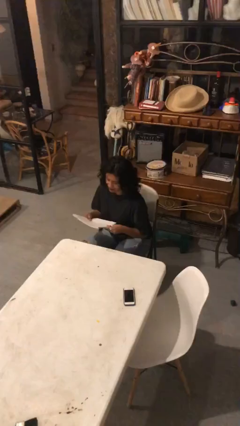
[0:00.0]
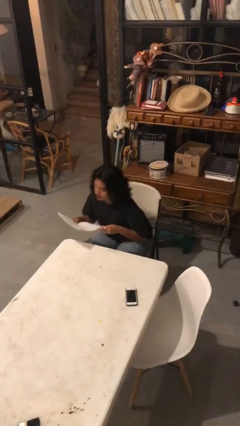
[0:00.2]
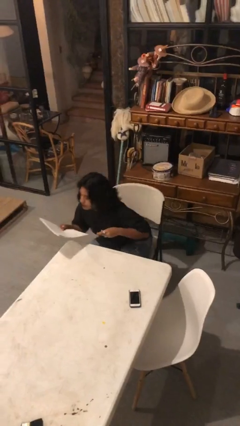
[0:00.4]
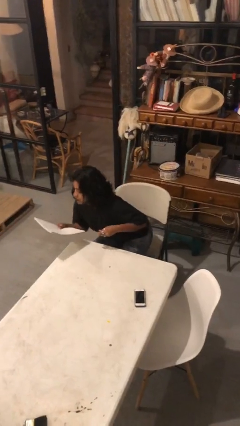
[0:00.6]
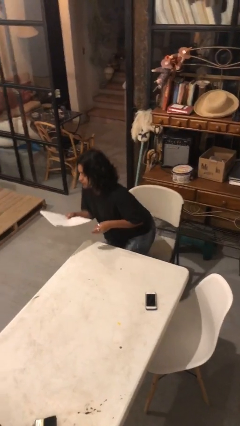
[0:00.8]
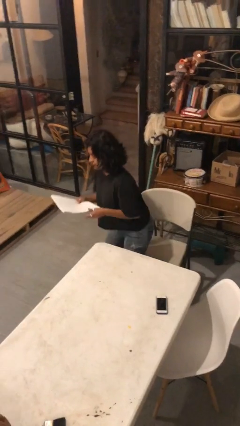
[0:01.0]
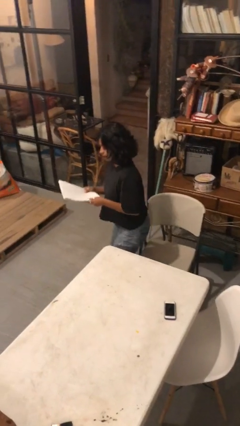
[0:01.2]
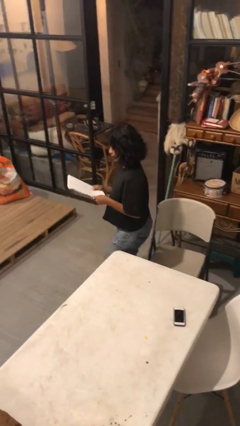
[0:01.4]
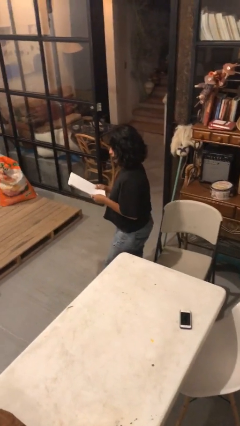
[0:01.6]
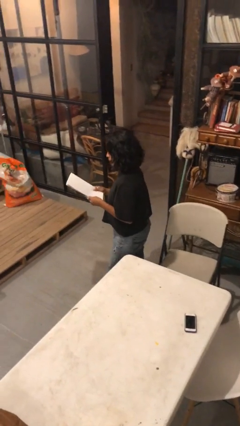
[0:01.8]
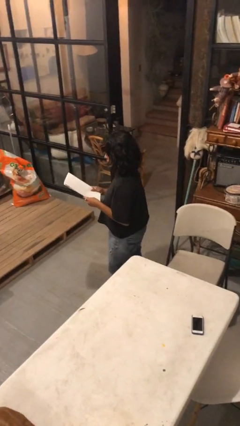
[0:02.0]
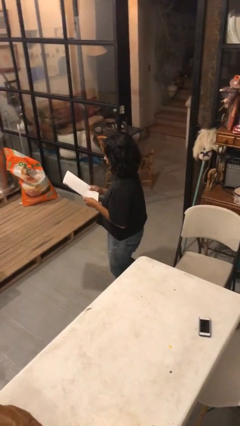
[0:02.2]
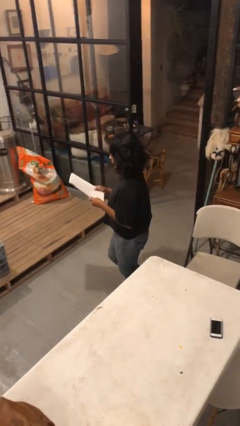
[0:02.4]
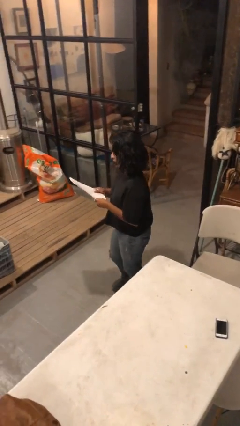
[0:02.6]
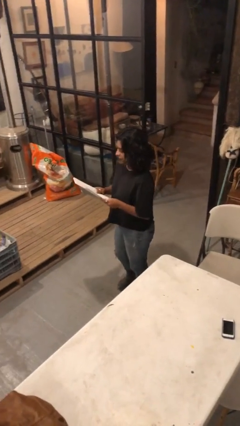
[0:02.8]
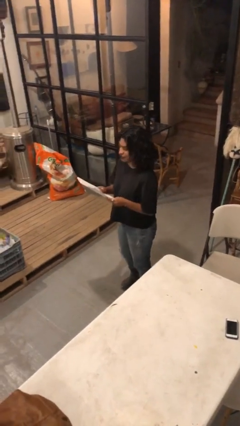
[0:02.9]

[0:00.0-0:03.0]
person stands up

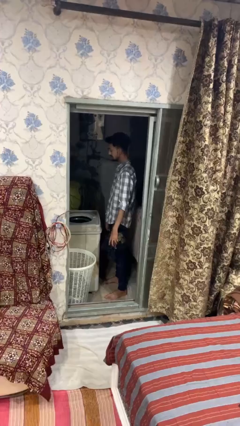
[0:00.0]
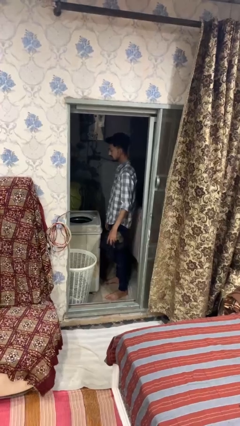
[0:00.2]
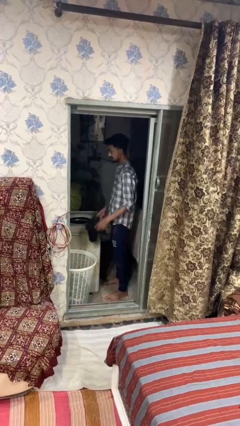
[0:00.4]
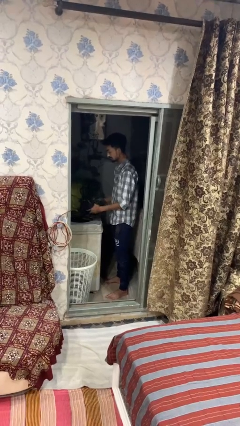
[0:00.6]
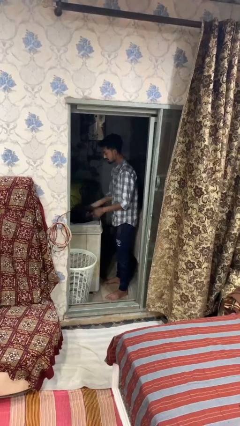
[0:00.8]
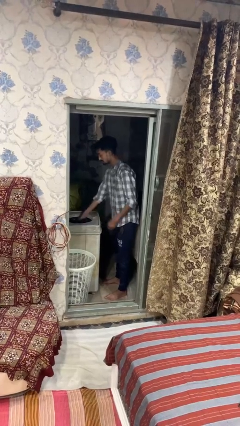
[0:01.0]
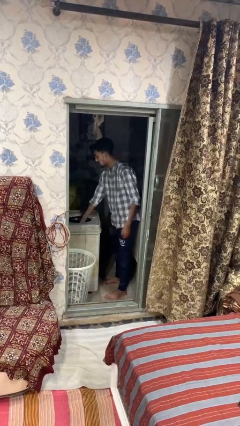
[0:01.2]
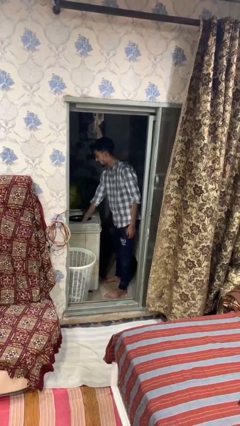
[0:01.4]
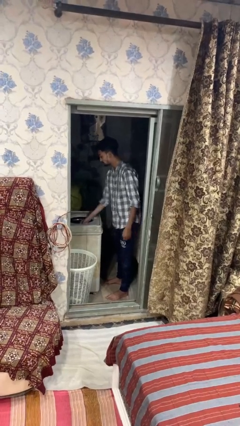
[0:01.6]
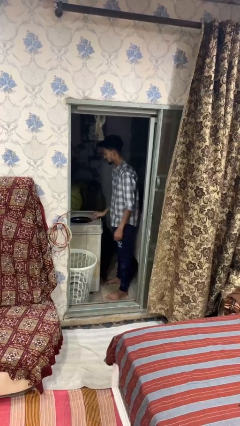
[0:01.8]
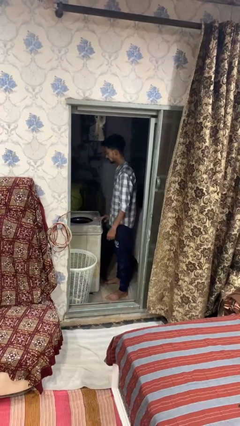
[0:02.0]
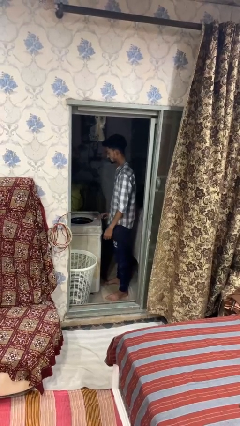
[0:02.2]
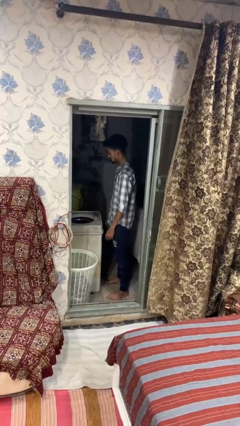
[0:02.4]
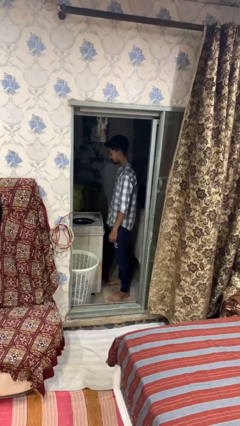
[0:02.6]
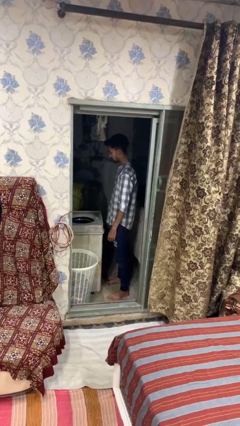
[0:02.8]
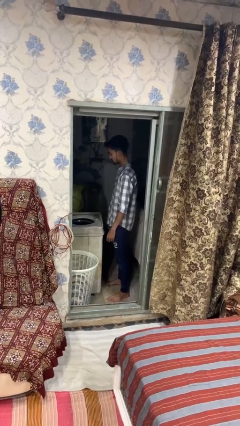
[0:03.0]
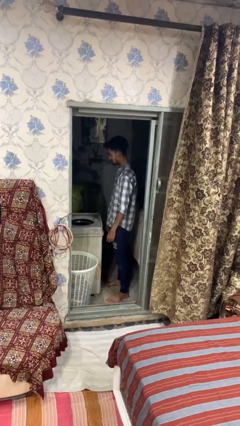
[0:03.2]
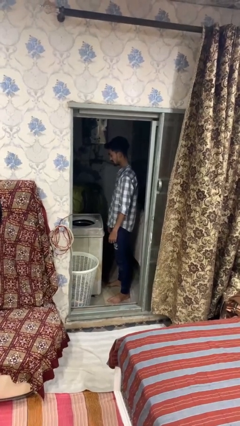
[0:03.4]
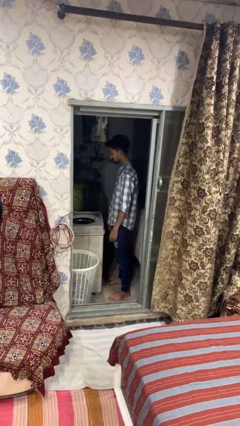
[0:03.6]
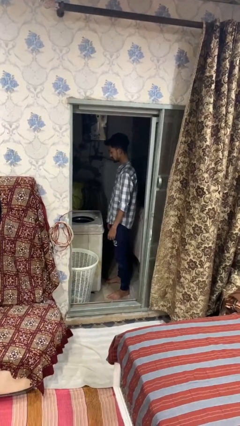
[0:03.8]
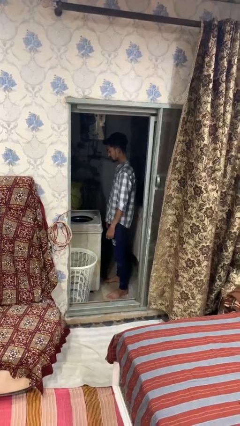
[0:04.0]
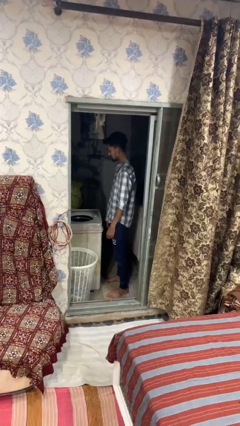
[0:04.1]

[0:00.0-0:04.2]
person loads dryer

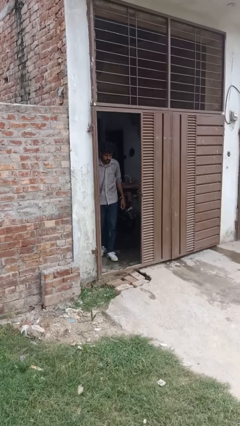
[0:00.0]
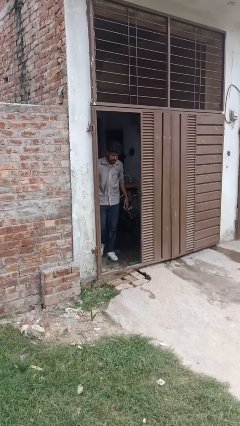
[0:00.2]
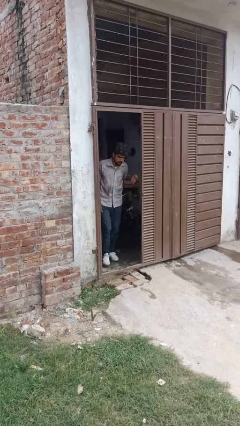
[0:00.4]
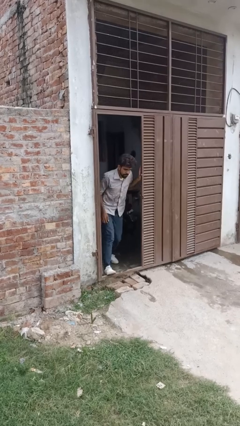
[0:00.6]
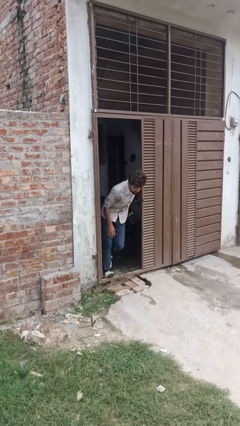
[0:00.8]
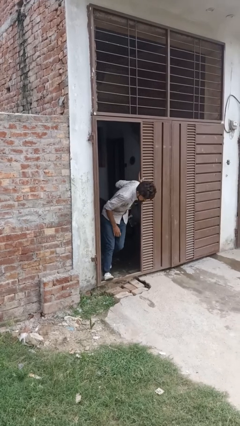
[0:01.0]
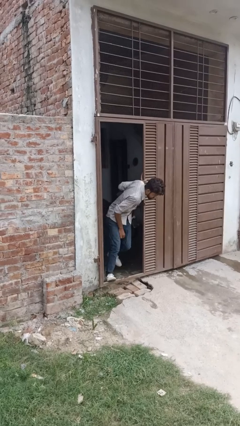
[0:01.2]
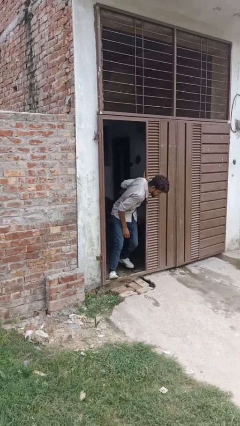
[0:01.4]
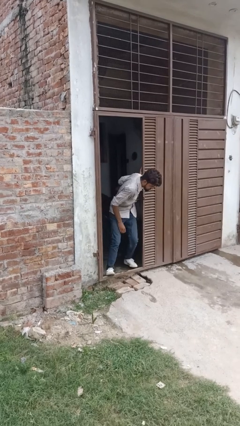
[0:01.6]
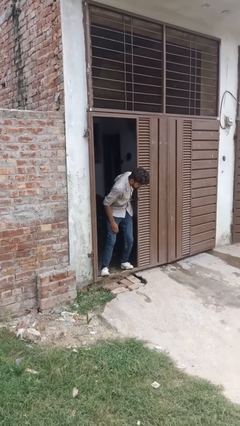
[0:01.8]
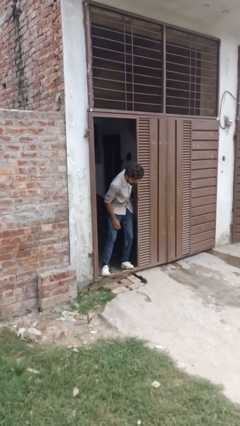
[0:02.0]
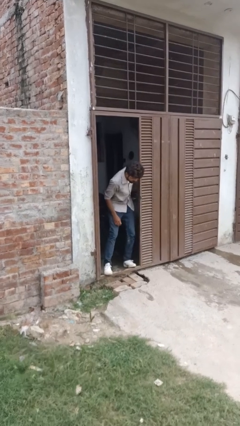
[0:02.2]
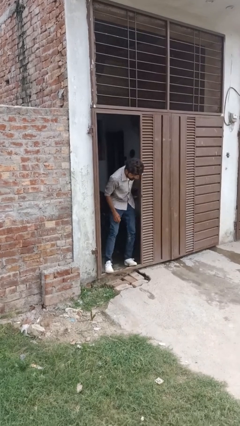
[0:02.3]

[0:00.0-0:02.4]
person bumps into wall

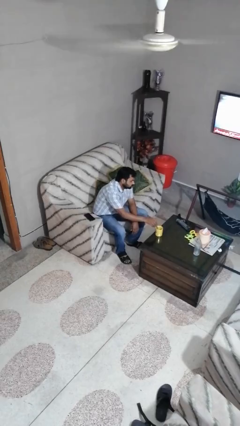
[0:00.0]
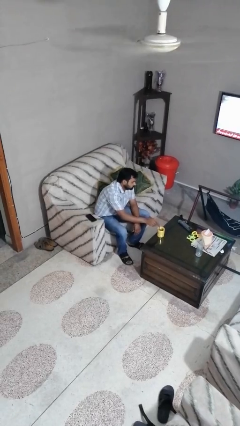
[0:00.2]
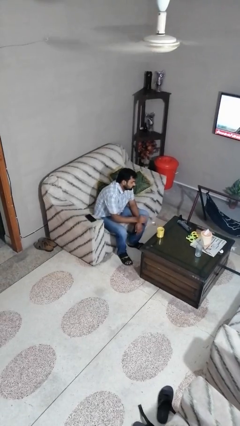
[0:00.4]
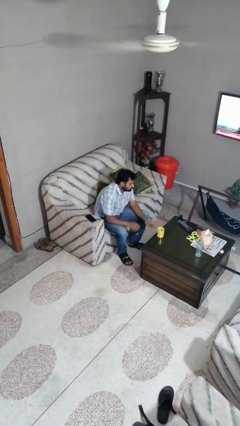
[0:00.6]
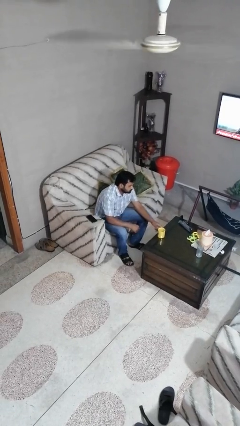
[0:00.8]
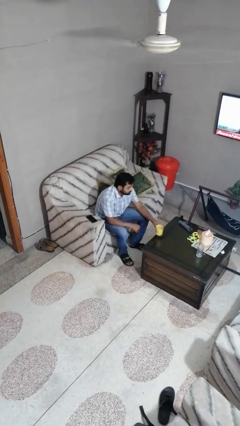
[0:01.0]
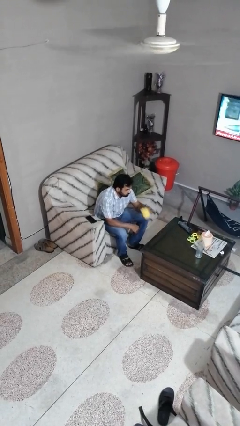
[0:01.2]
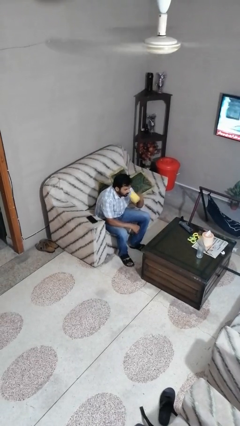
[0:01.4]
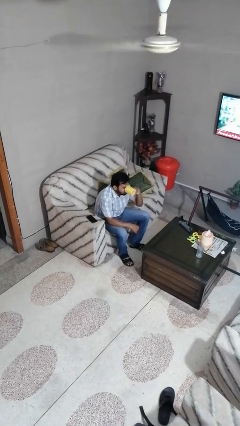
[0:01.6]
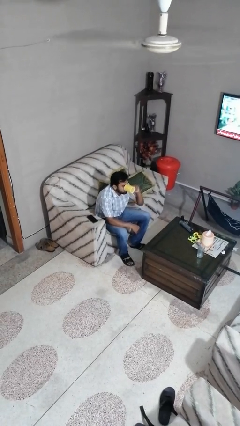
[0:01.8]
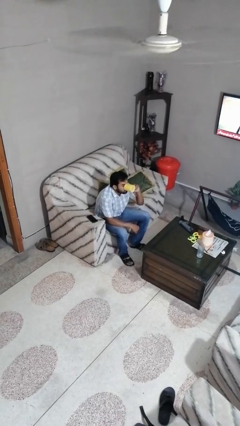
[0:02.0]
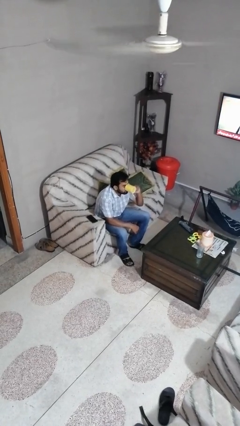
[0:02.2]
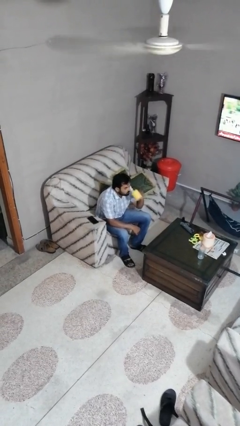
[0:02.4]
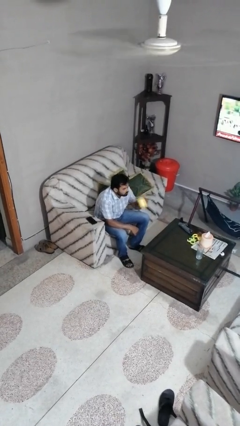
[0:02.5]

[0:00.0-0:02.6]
person drinks from mug

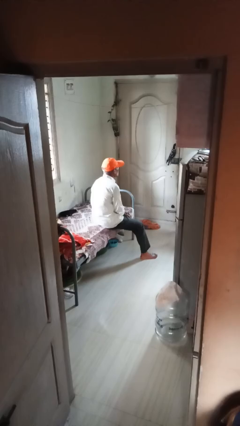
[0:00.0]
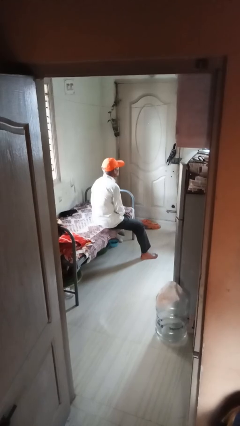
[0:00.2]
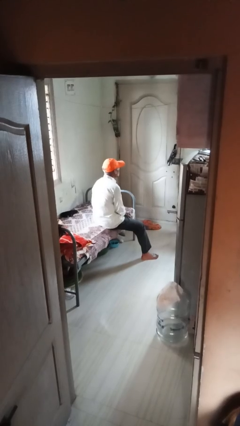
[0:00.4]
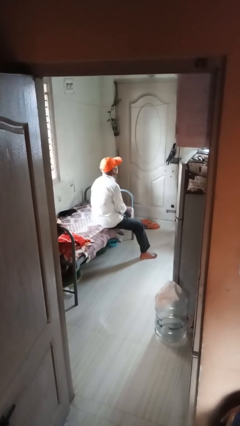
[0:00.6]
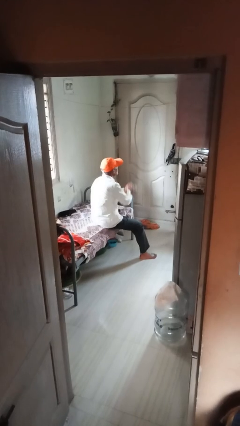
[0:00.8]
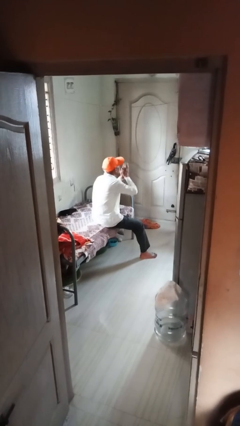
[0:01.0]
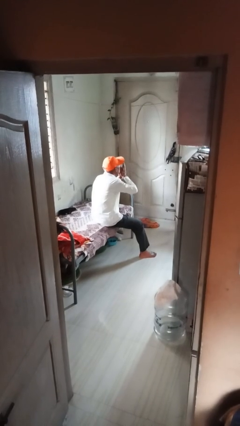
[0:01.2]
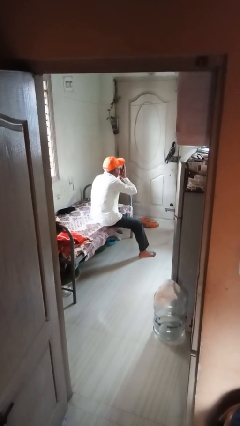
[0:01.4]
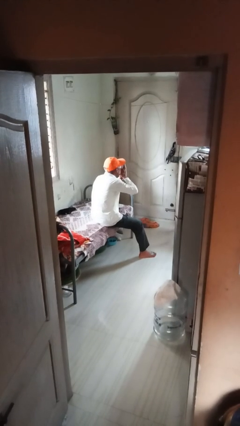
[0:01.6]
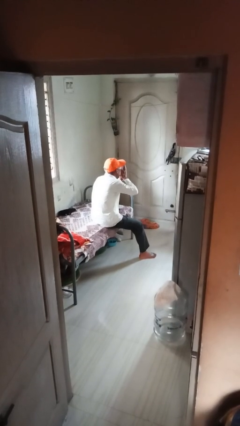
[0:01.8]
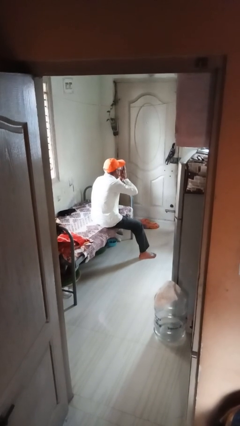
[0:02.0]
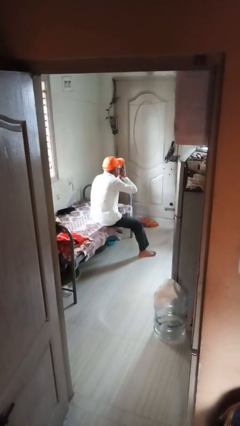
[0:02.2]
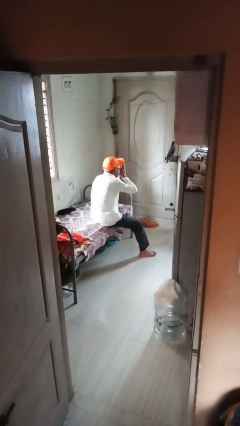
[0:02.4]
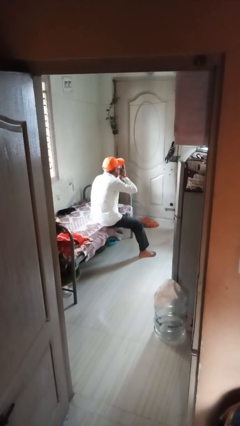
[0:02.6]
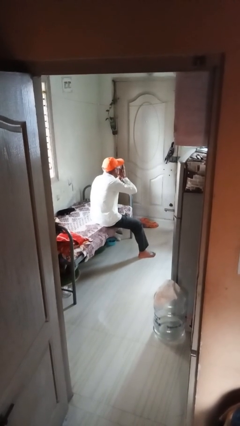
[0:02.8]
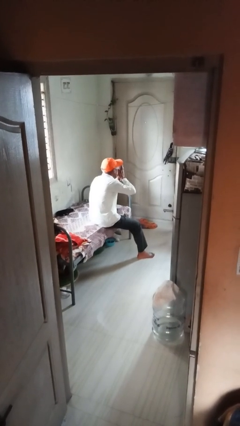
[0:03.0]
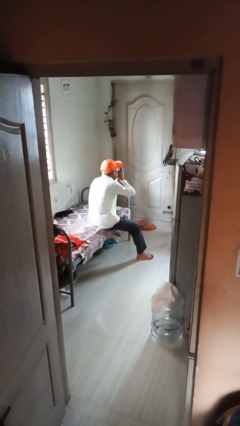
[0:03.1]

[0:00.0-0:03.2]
person prays

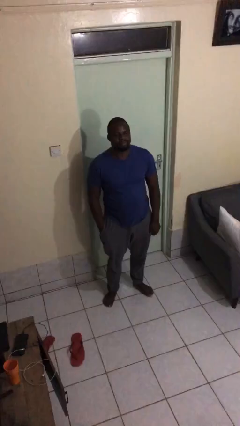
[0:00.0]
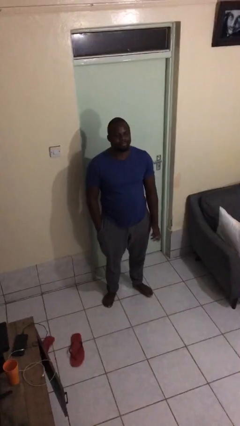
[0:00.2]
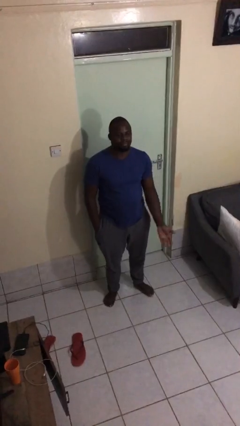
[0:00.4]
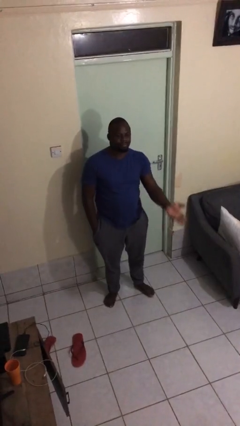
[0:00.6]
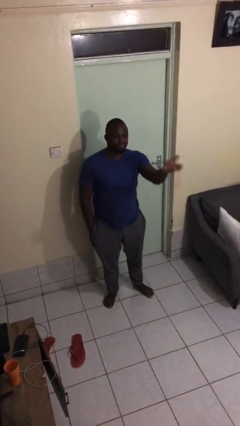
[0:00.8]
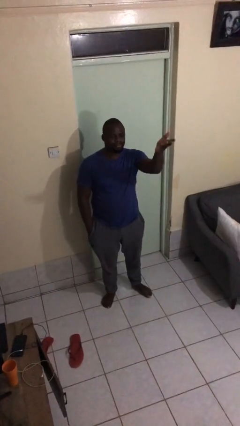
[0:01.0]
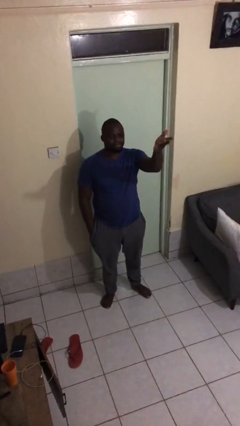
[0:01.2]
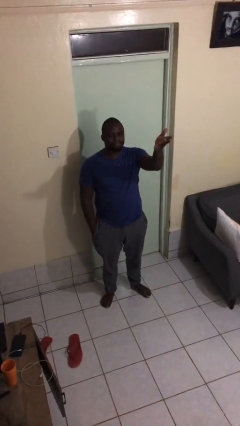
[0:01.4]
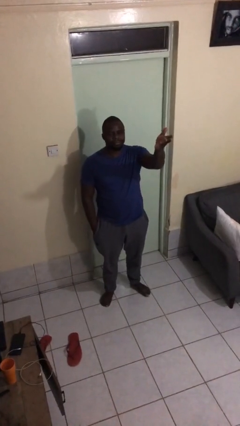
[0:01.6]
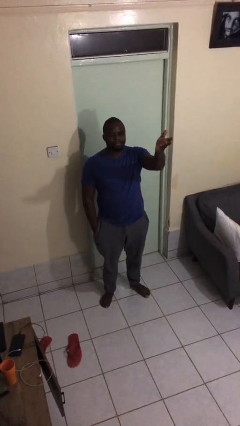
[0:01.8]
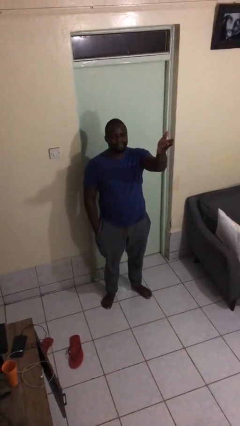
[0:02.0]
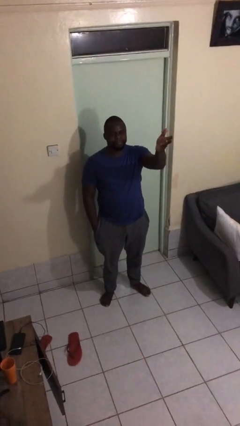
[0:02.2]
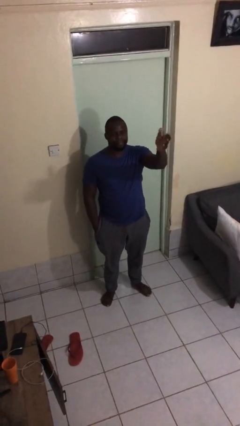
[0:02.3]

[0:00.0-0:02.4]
person gestures swipe up
